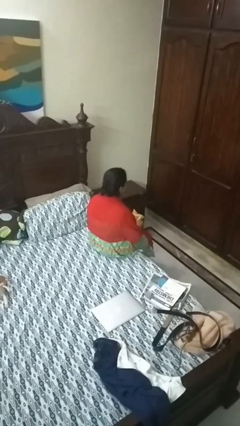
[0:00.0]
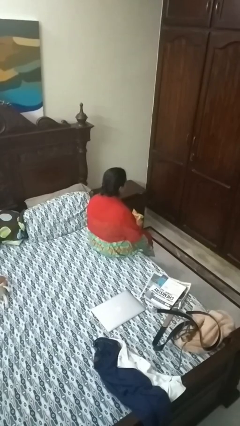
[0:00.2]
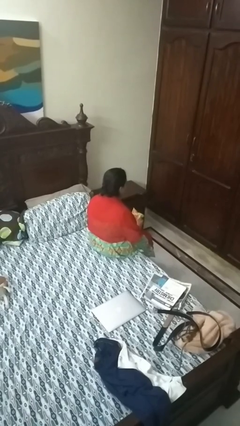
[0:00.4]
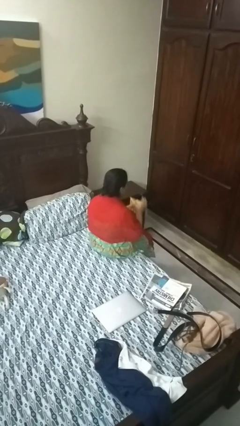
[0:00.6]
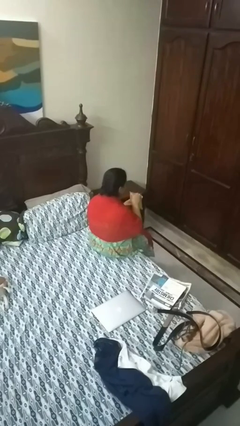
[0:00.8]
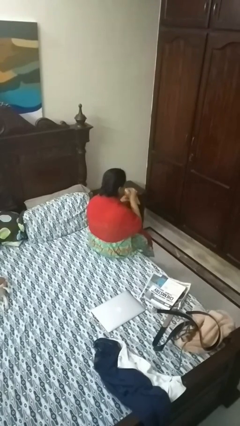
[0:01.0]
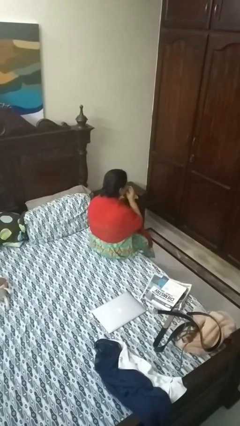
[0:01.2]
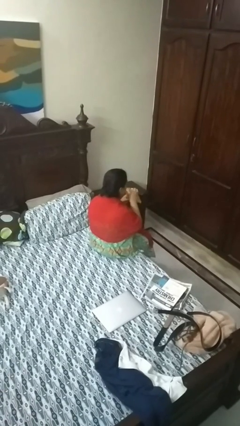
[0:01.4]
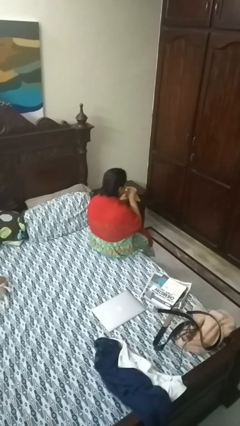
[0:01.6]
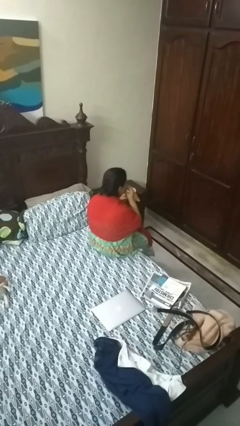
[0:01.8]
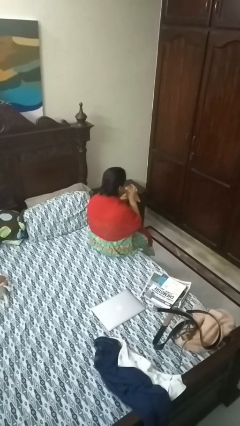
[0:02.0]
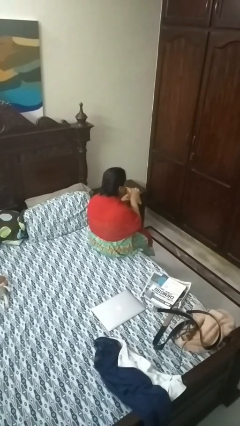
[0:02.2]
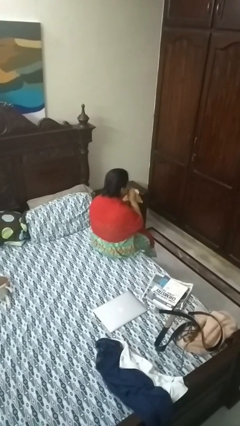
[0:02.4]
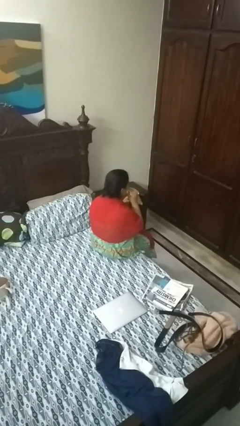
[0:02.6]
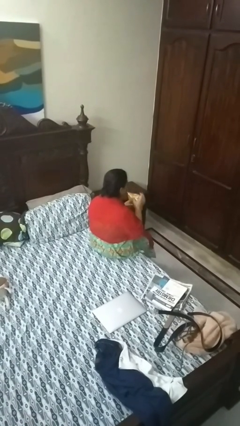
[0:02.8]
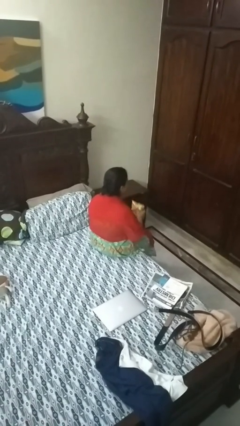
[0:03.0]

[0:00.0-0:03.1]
person eats snack from bag

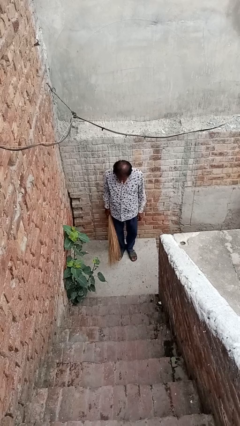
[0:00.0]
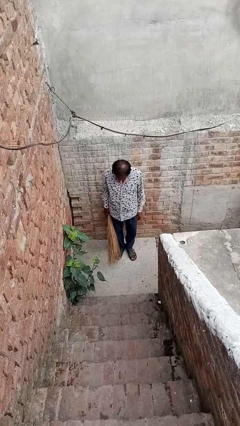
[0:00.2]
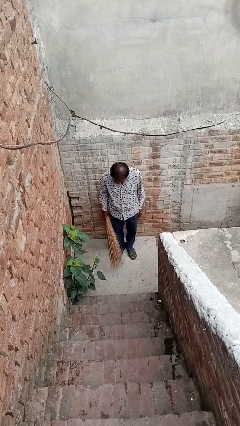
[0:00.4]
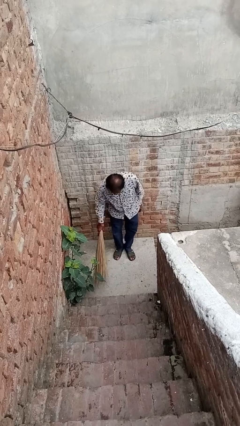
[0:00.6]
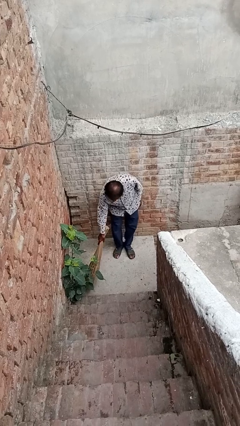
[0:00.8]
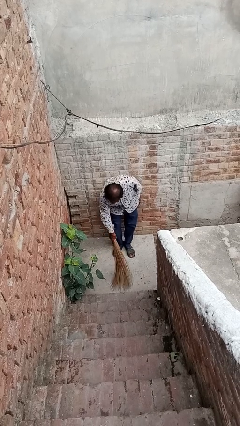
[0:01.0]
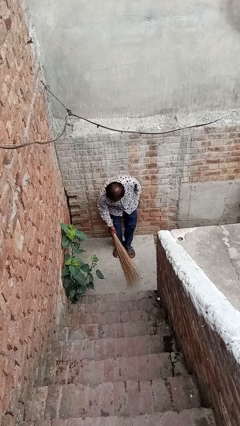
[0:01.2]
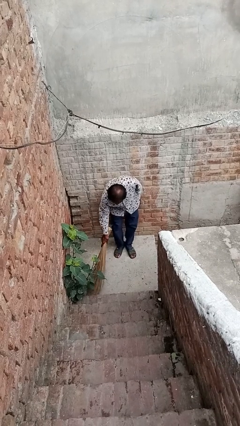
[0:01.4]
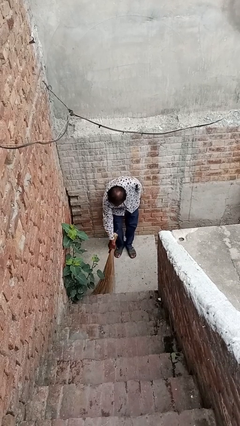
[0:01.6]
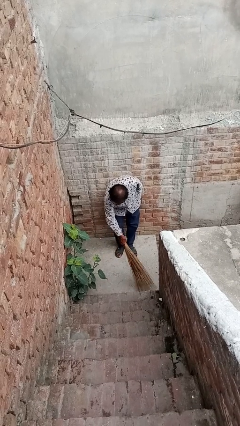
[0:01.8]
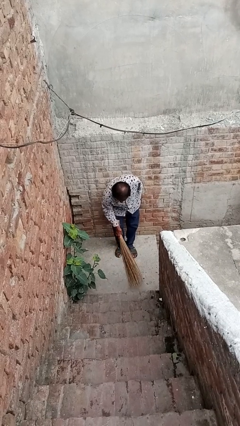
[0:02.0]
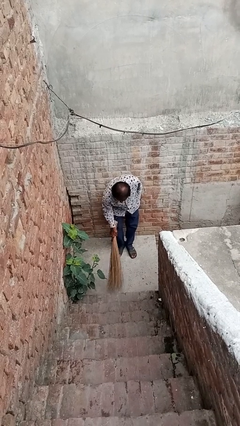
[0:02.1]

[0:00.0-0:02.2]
person sweeps floor

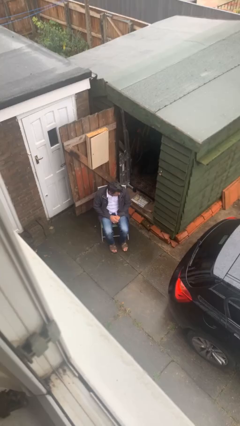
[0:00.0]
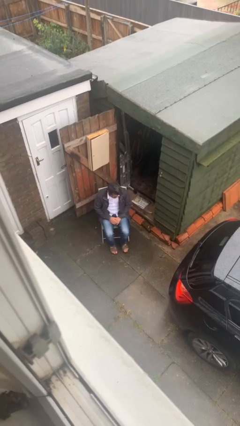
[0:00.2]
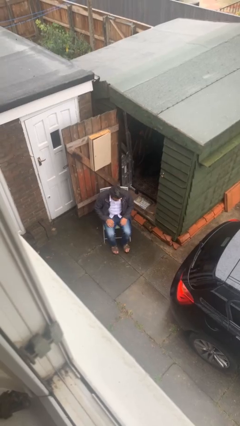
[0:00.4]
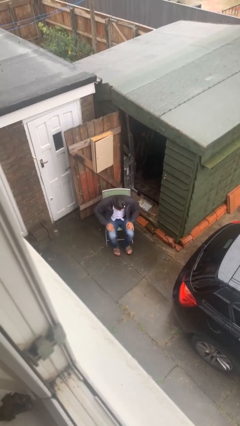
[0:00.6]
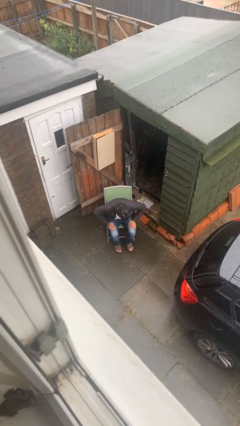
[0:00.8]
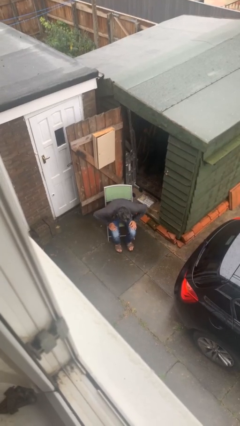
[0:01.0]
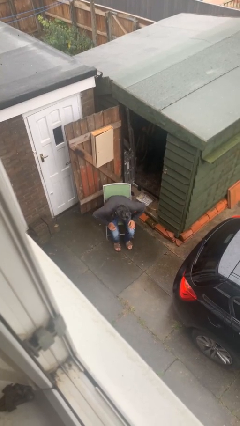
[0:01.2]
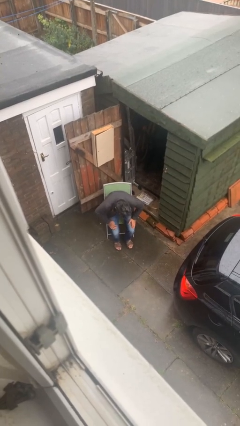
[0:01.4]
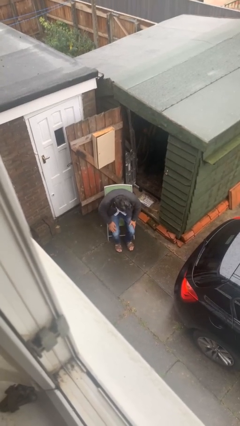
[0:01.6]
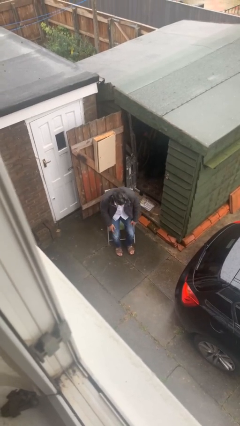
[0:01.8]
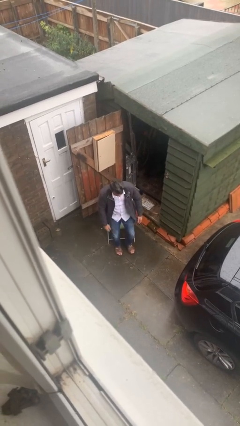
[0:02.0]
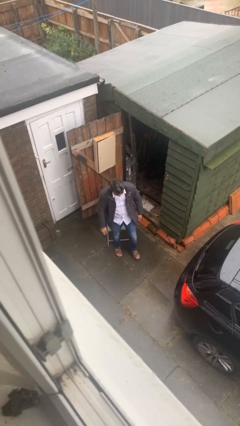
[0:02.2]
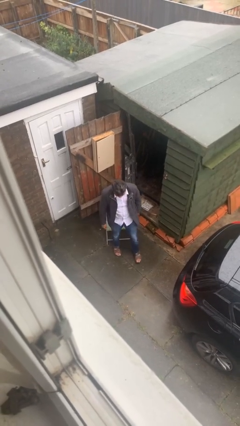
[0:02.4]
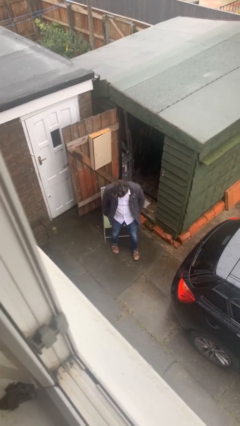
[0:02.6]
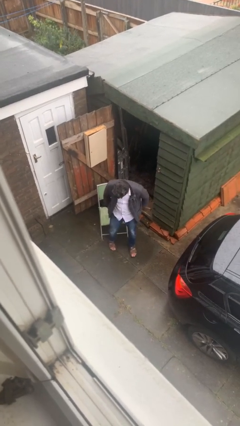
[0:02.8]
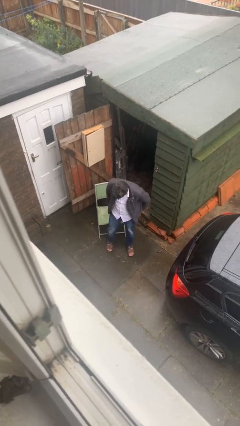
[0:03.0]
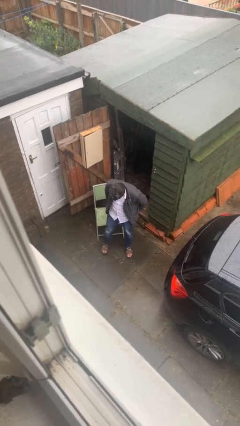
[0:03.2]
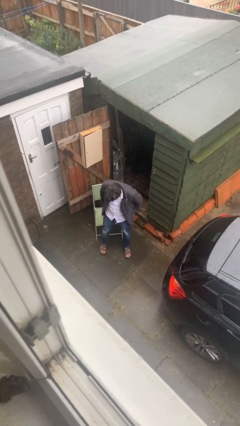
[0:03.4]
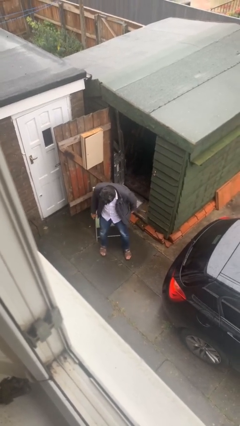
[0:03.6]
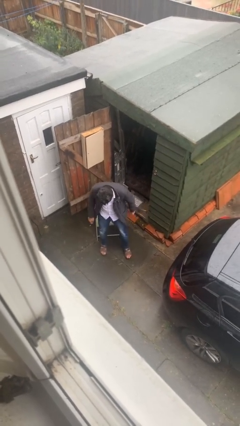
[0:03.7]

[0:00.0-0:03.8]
person stands up

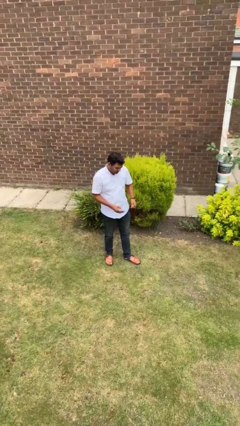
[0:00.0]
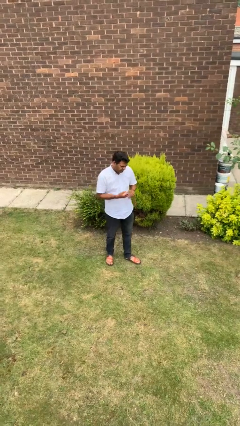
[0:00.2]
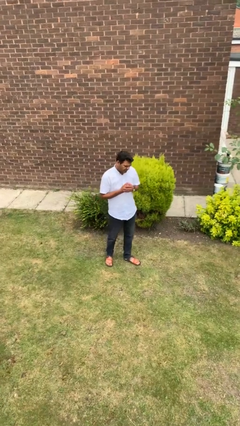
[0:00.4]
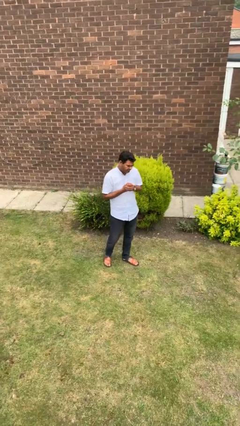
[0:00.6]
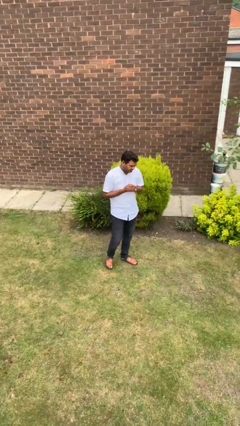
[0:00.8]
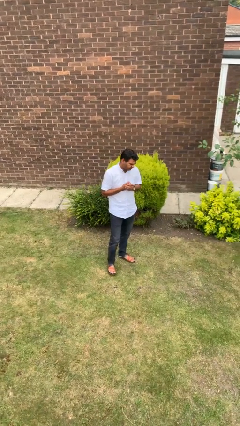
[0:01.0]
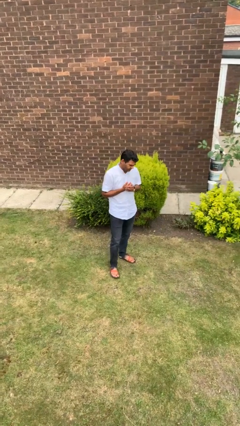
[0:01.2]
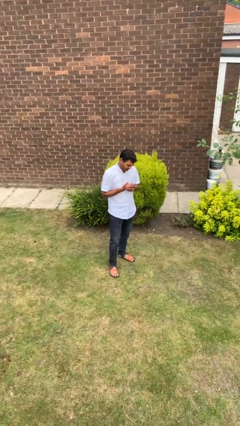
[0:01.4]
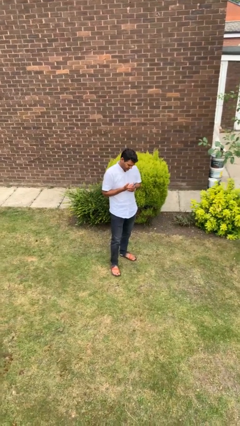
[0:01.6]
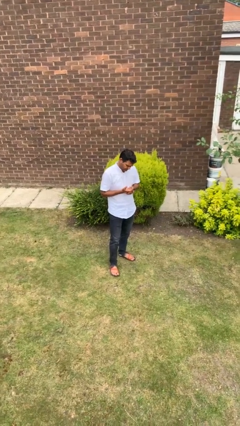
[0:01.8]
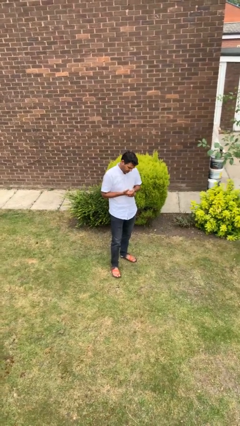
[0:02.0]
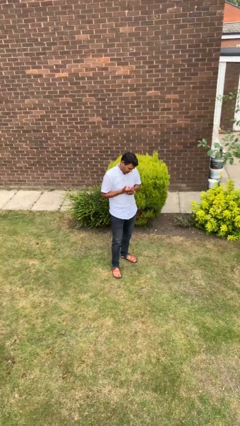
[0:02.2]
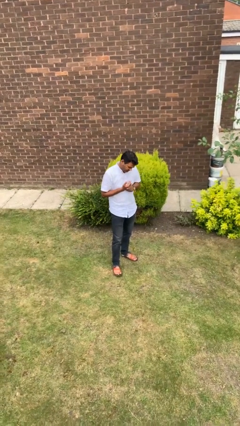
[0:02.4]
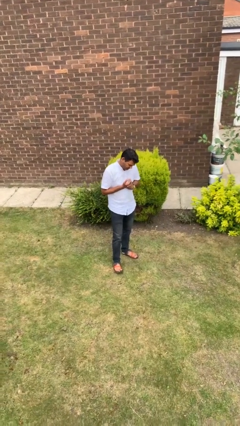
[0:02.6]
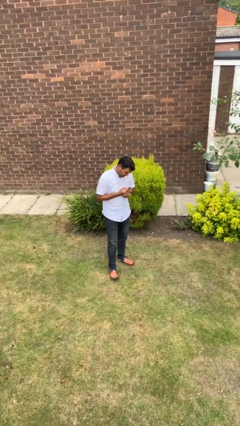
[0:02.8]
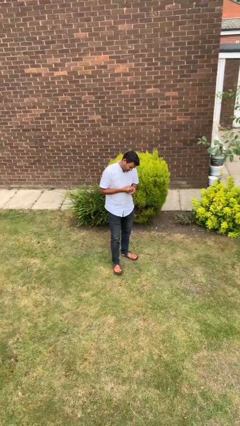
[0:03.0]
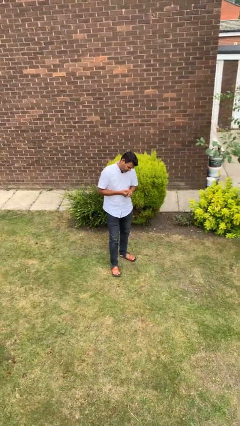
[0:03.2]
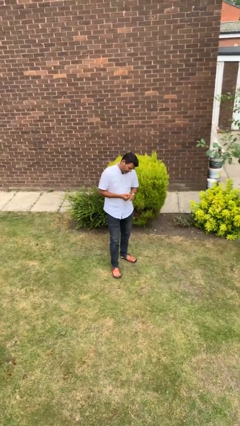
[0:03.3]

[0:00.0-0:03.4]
person cracks knuckles

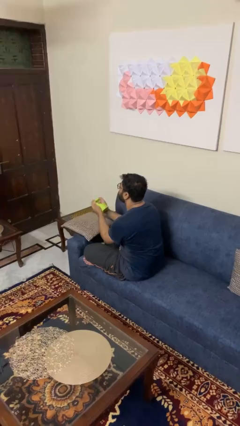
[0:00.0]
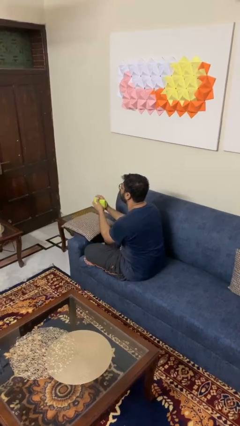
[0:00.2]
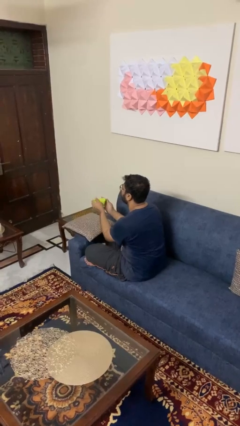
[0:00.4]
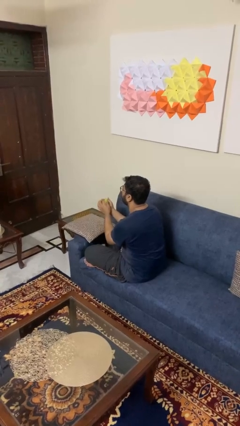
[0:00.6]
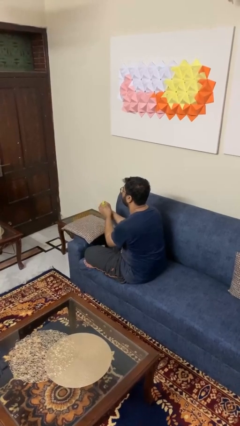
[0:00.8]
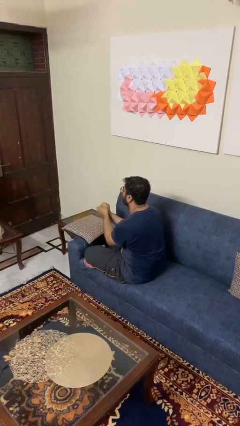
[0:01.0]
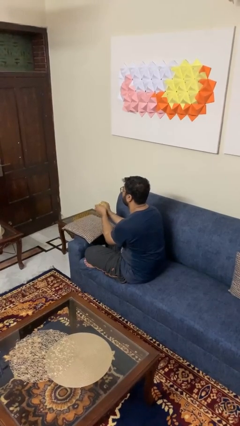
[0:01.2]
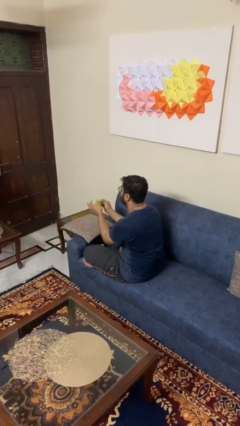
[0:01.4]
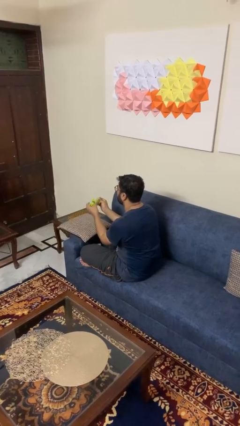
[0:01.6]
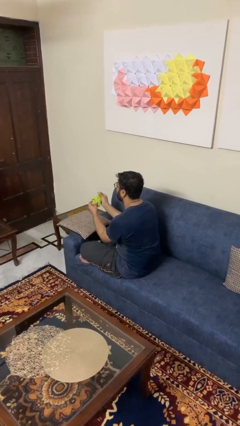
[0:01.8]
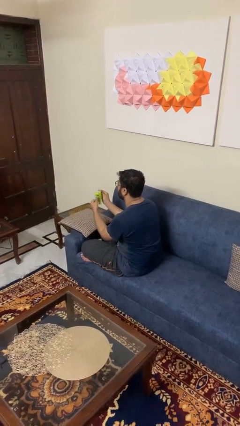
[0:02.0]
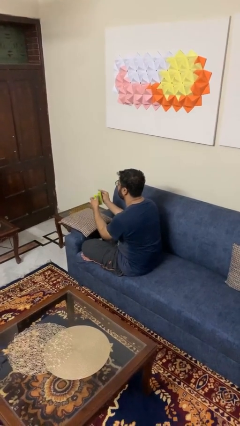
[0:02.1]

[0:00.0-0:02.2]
person crumples paper

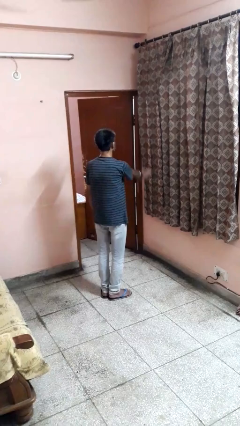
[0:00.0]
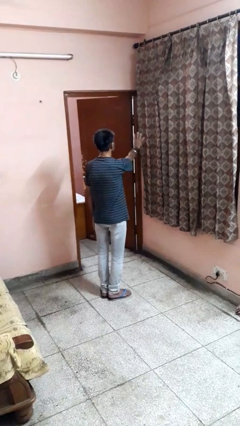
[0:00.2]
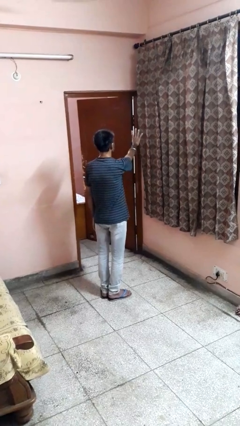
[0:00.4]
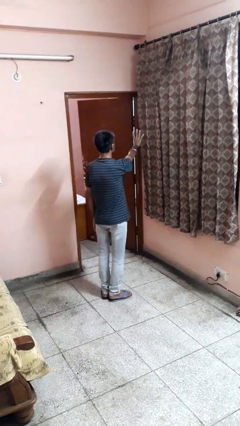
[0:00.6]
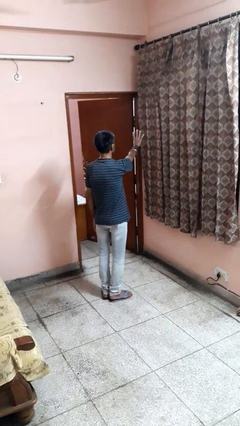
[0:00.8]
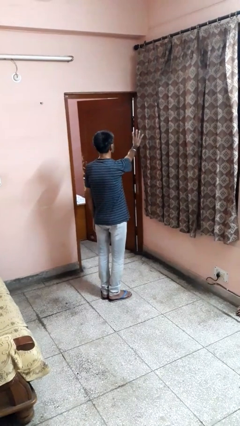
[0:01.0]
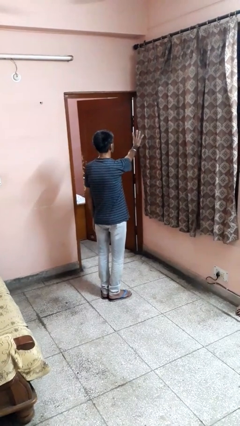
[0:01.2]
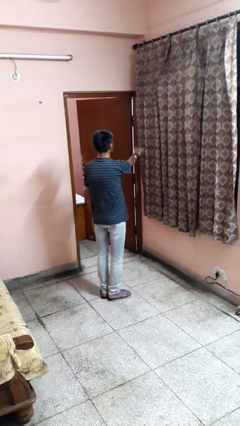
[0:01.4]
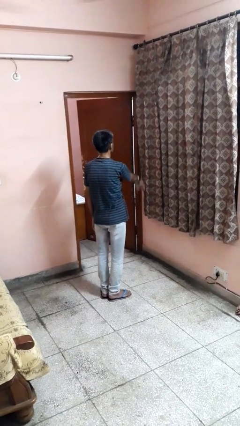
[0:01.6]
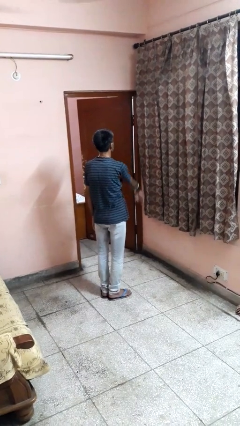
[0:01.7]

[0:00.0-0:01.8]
person gestures number four

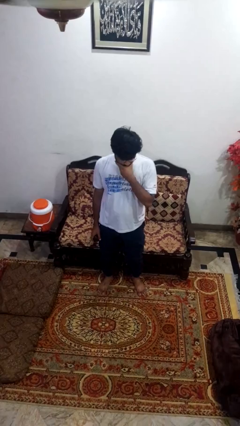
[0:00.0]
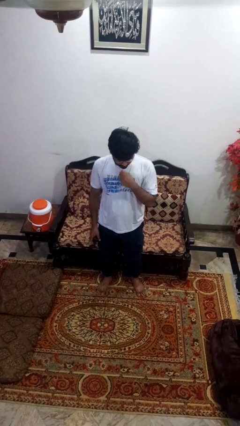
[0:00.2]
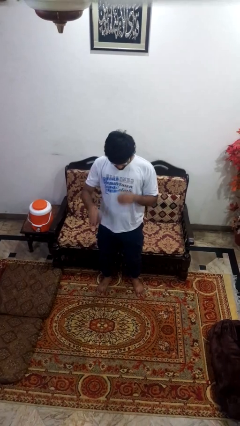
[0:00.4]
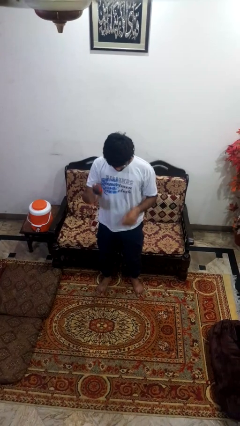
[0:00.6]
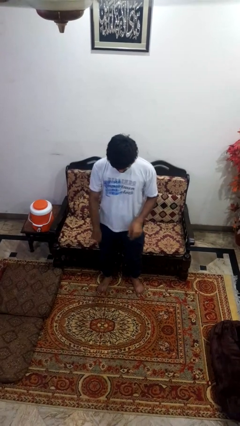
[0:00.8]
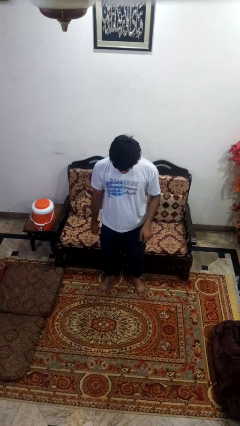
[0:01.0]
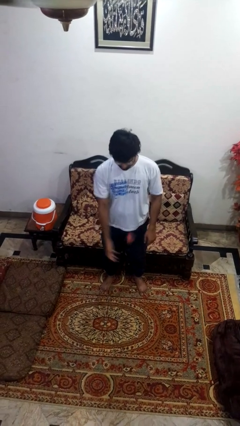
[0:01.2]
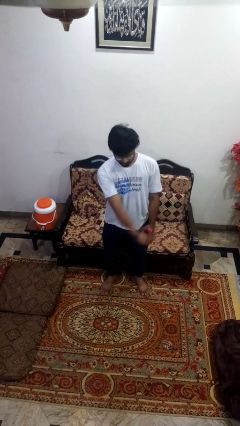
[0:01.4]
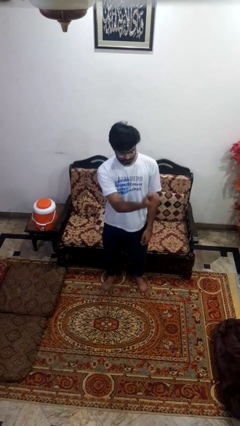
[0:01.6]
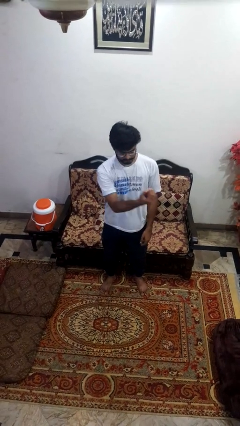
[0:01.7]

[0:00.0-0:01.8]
person bounces ball on floor
